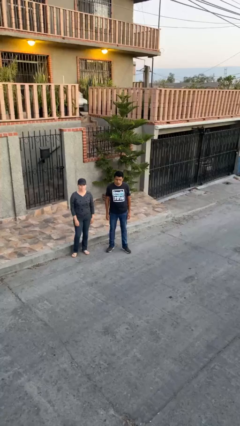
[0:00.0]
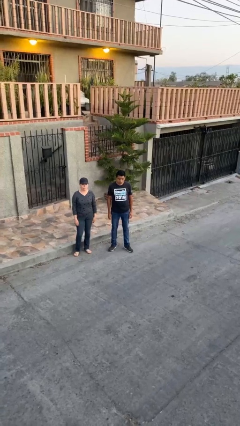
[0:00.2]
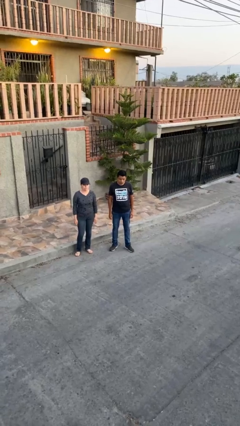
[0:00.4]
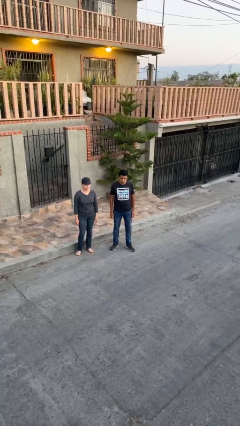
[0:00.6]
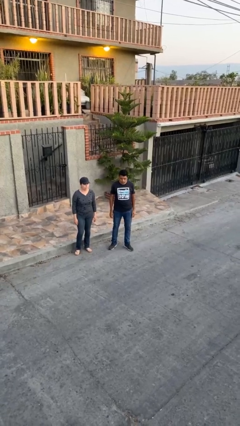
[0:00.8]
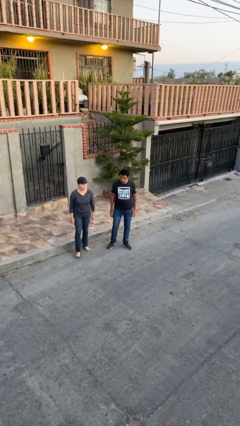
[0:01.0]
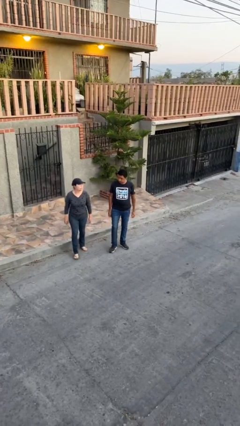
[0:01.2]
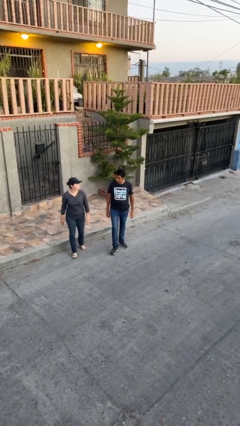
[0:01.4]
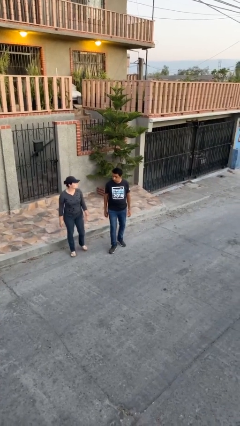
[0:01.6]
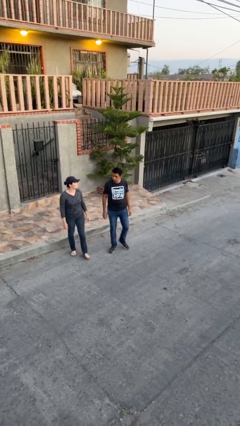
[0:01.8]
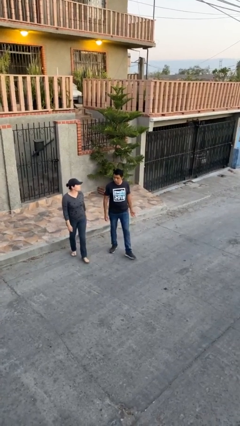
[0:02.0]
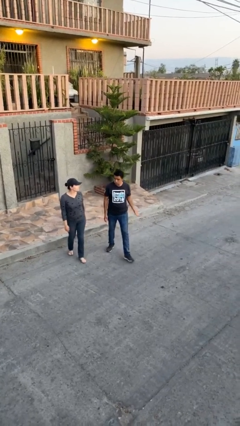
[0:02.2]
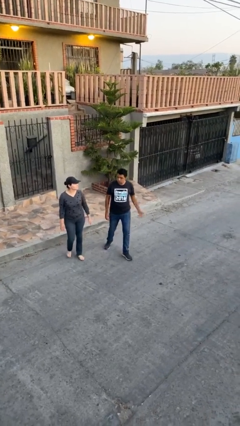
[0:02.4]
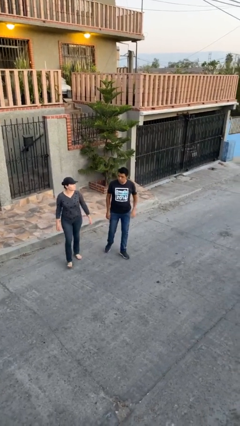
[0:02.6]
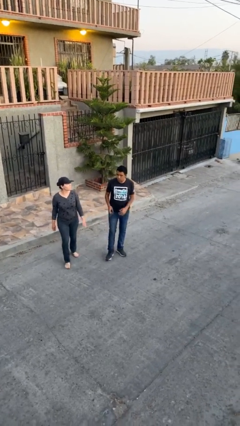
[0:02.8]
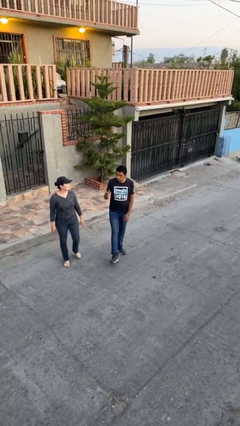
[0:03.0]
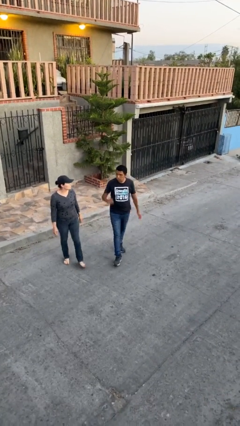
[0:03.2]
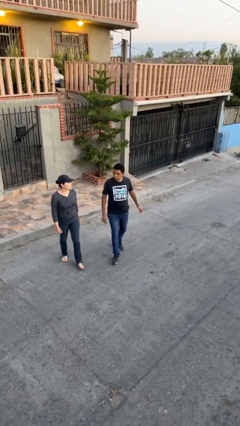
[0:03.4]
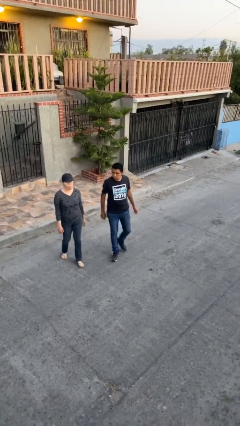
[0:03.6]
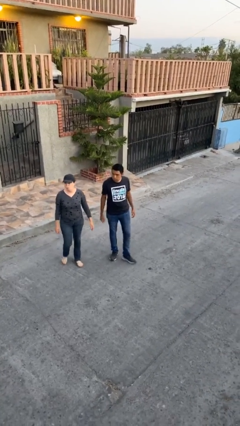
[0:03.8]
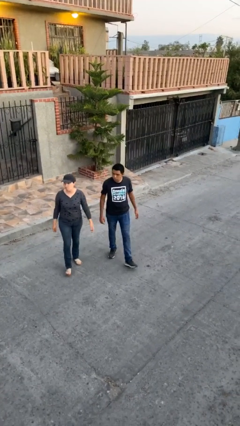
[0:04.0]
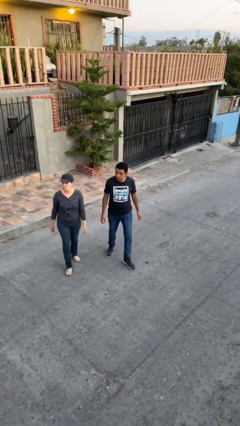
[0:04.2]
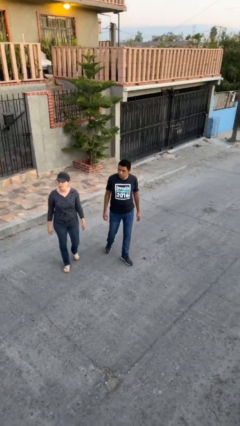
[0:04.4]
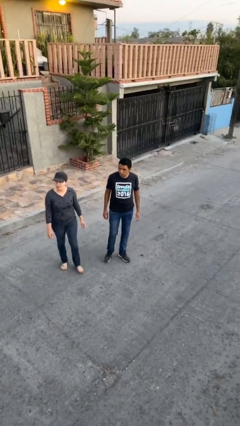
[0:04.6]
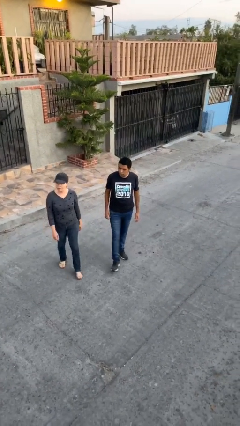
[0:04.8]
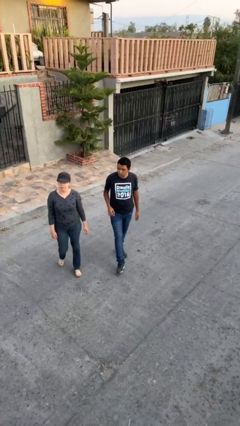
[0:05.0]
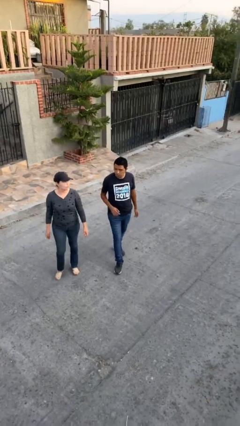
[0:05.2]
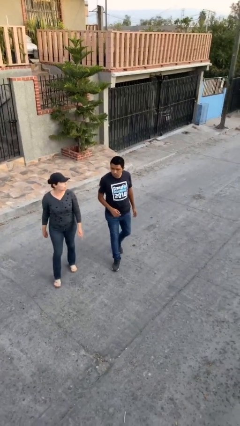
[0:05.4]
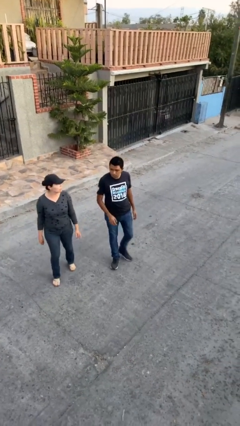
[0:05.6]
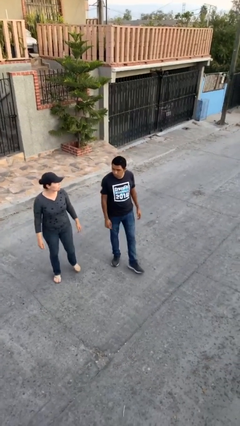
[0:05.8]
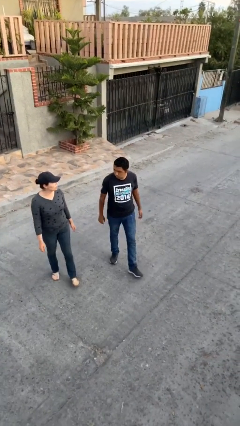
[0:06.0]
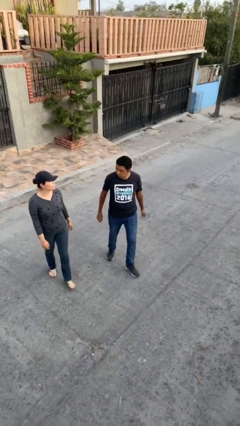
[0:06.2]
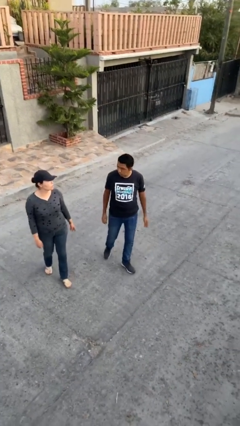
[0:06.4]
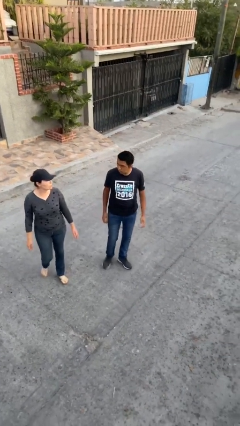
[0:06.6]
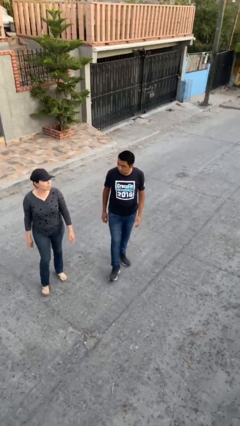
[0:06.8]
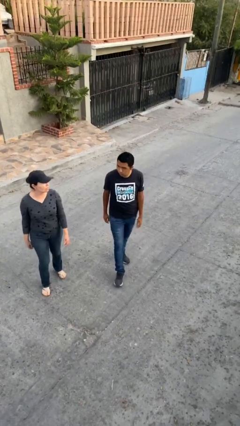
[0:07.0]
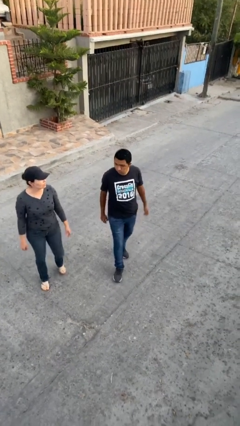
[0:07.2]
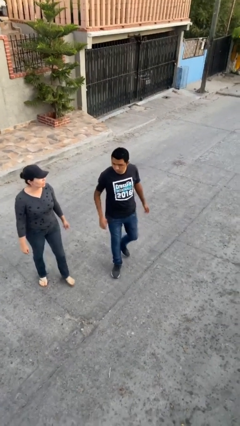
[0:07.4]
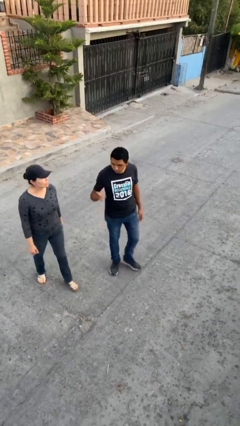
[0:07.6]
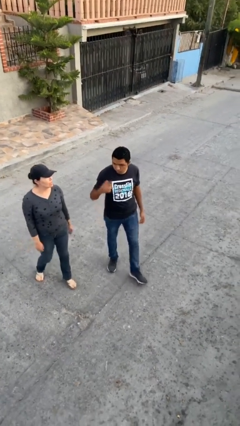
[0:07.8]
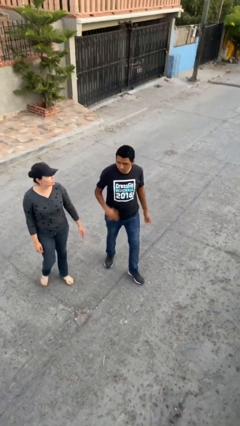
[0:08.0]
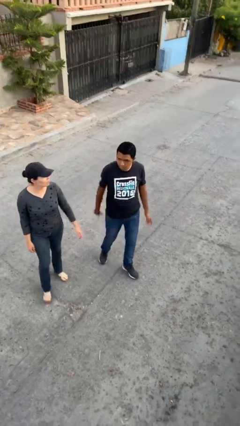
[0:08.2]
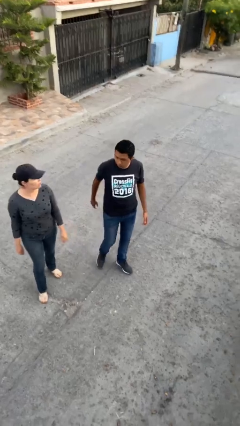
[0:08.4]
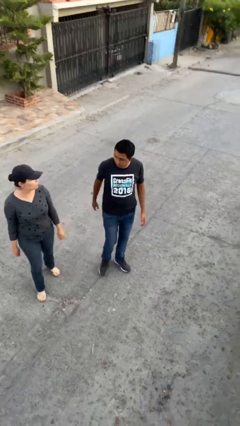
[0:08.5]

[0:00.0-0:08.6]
person talks to person

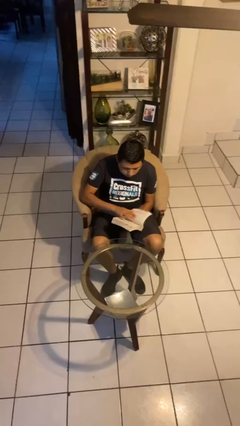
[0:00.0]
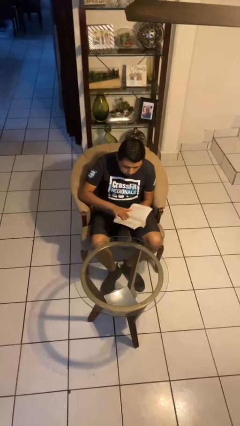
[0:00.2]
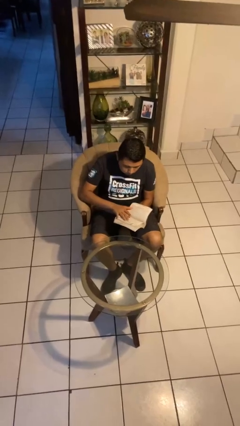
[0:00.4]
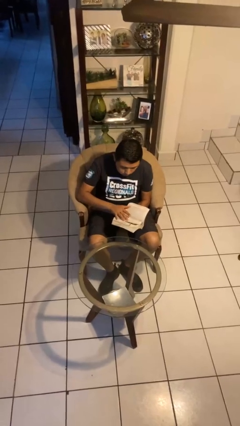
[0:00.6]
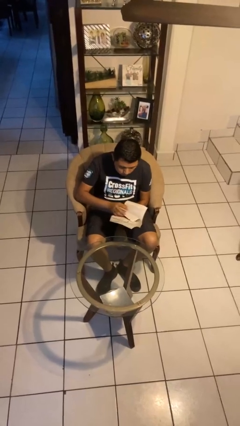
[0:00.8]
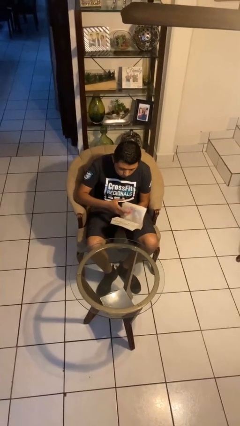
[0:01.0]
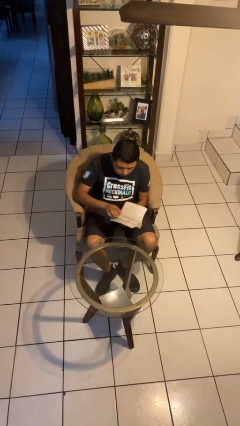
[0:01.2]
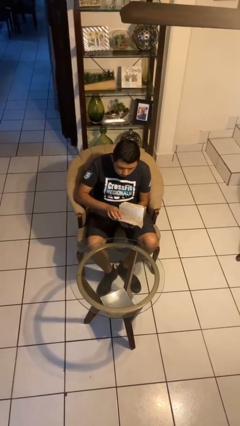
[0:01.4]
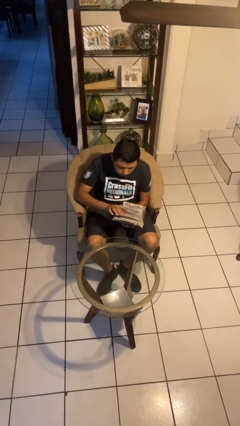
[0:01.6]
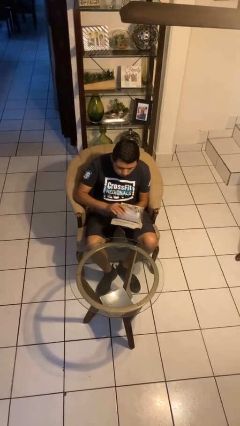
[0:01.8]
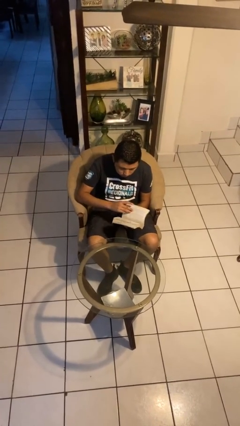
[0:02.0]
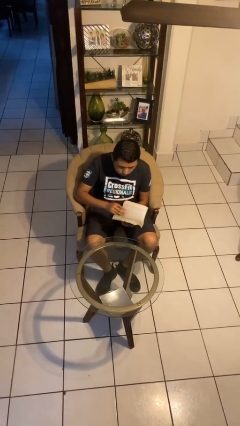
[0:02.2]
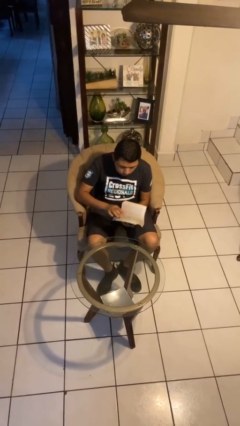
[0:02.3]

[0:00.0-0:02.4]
person reads book

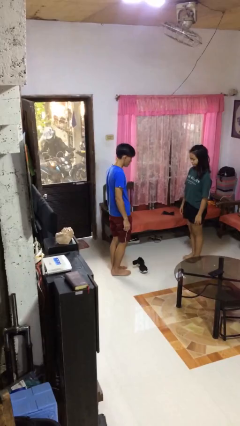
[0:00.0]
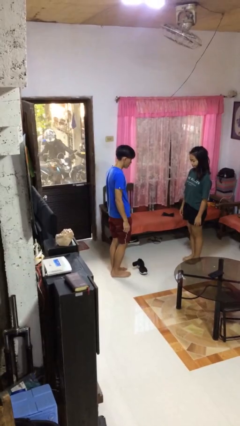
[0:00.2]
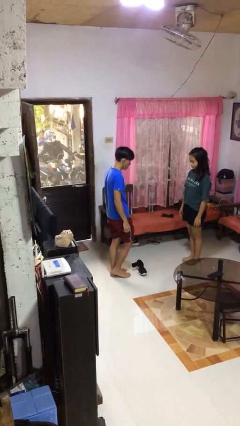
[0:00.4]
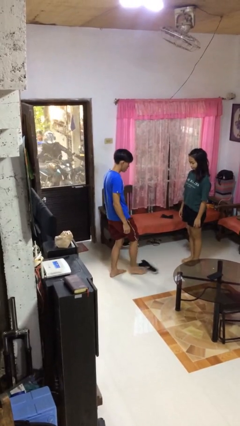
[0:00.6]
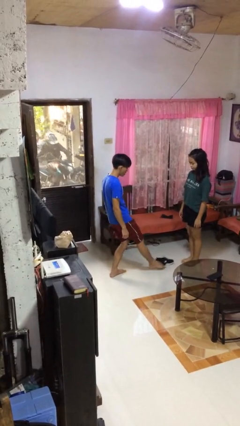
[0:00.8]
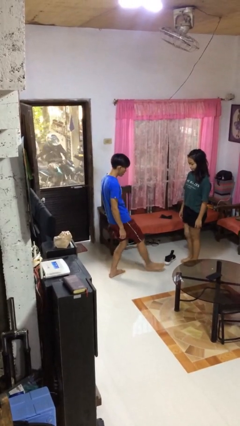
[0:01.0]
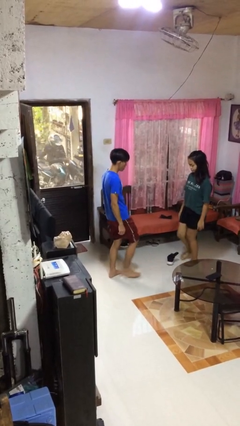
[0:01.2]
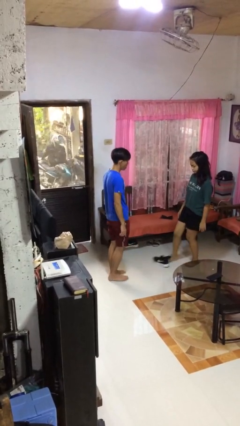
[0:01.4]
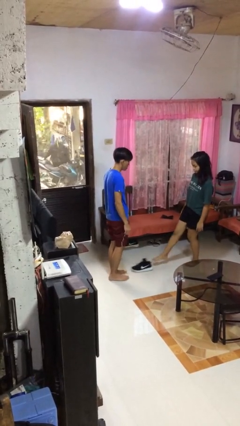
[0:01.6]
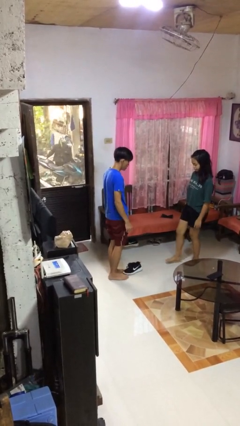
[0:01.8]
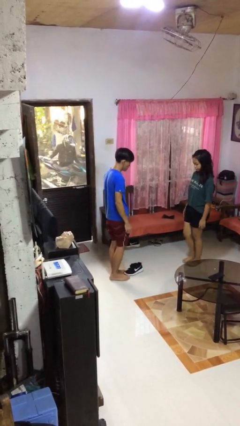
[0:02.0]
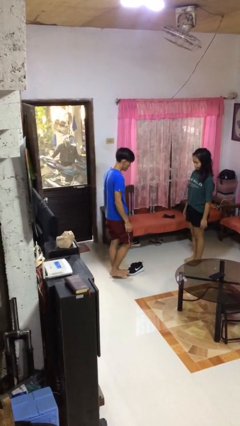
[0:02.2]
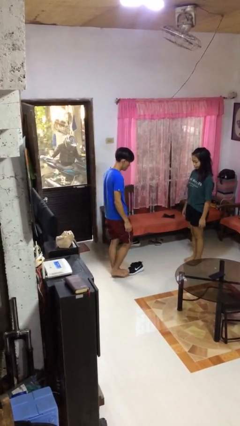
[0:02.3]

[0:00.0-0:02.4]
person kicks object to person

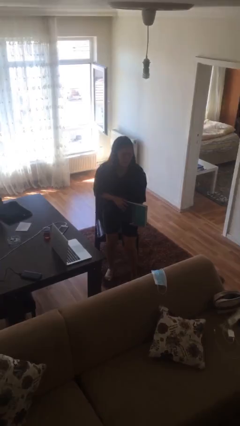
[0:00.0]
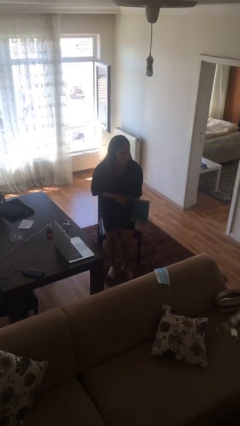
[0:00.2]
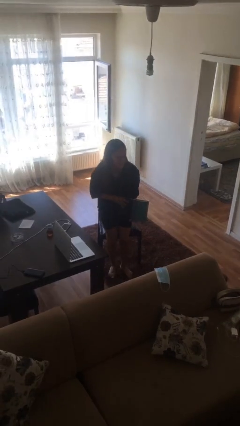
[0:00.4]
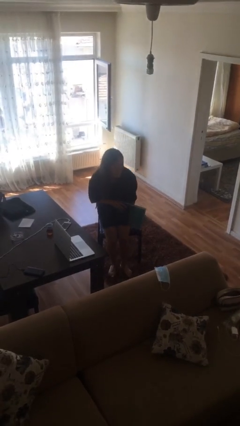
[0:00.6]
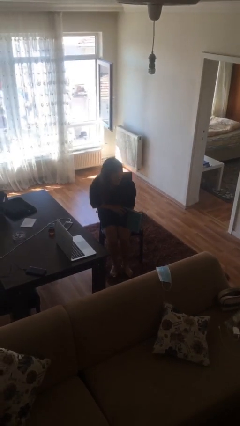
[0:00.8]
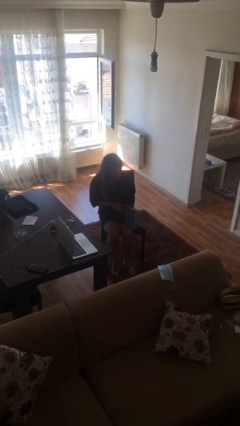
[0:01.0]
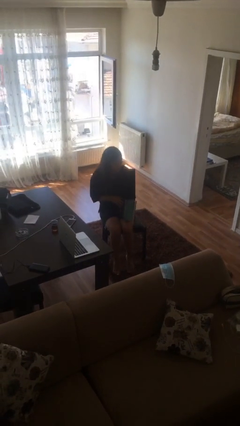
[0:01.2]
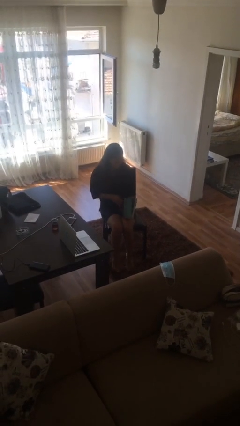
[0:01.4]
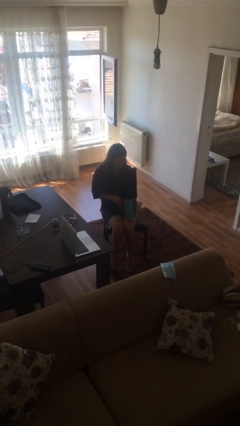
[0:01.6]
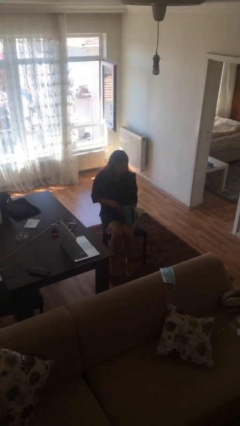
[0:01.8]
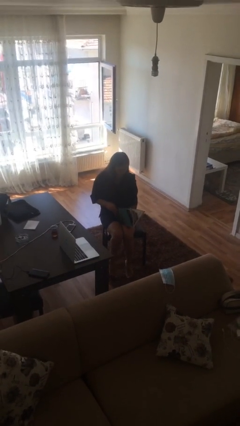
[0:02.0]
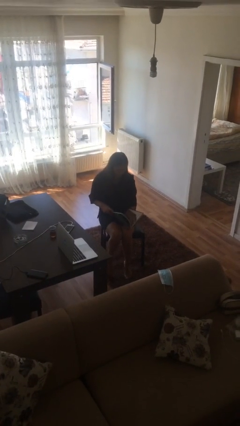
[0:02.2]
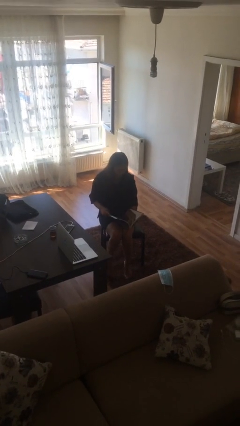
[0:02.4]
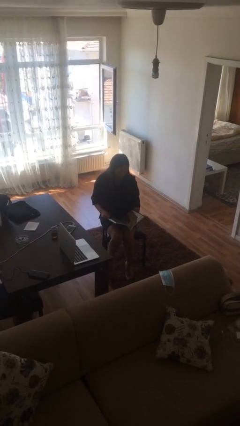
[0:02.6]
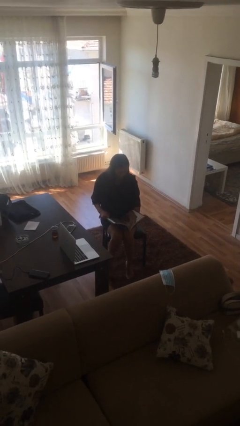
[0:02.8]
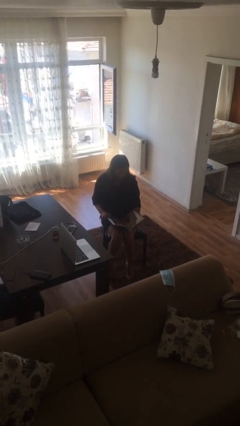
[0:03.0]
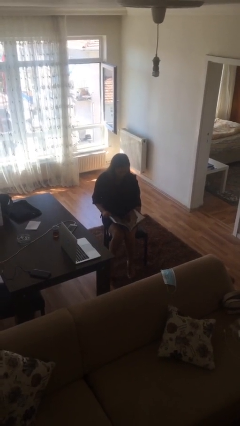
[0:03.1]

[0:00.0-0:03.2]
person sits down

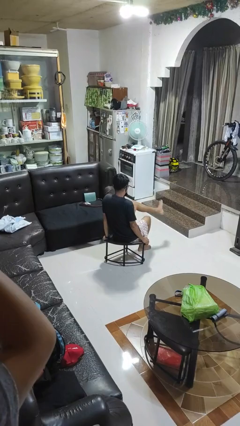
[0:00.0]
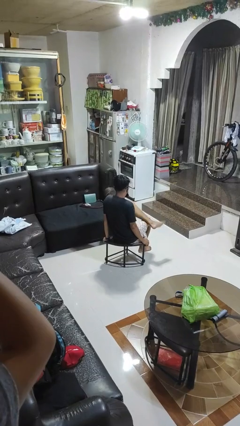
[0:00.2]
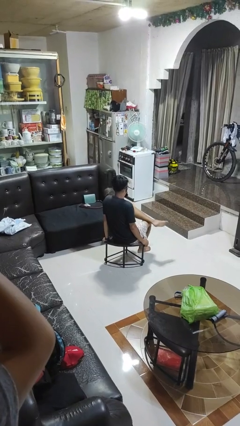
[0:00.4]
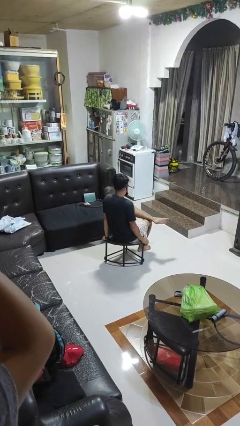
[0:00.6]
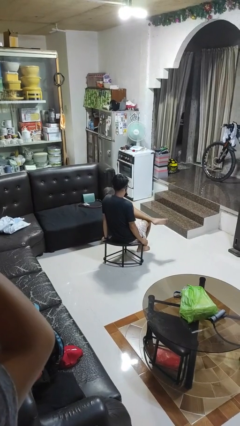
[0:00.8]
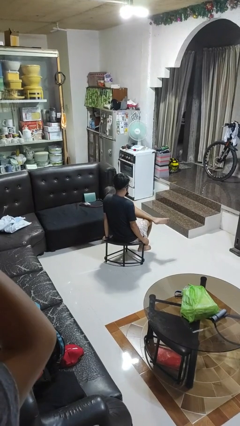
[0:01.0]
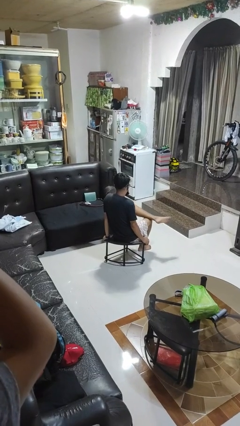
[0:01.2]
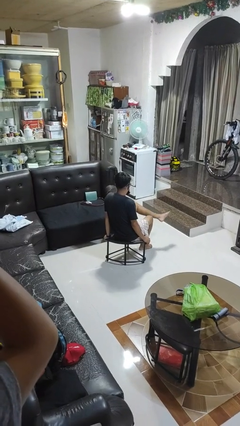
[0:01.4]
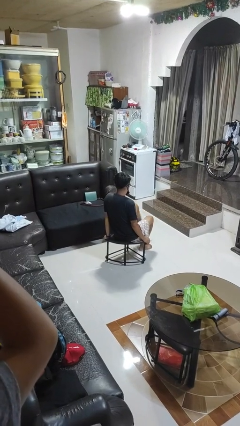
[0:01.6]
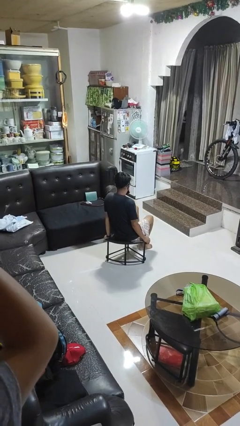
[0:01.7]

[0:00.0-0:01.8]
person crosses legs
